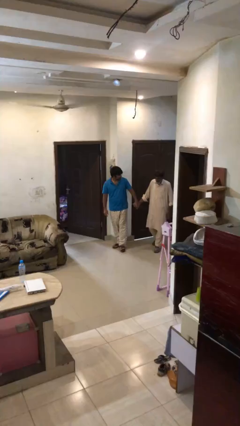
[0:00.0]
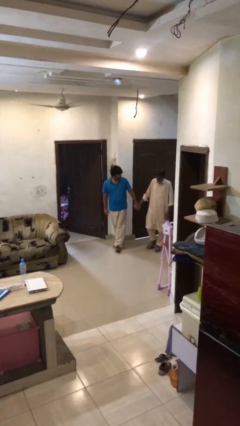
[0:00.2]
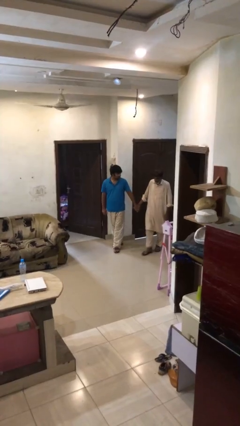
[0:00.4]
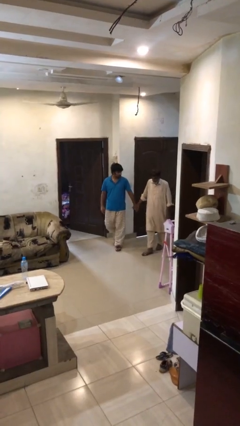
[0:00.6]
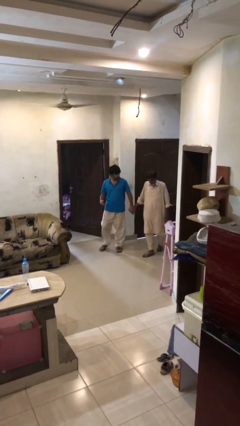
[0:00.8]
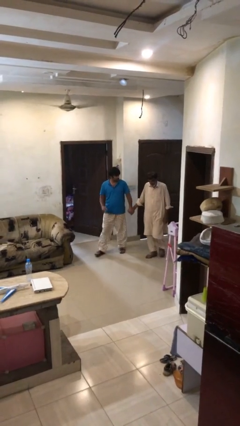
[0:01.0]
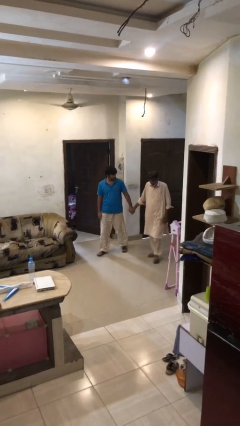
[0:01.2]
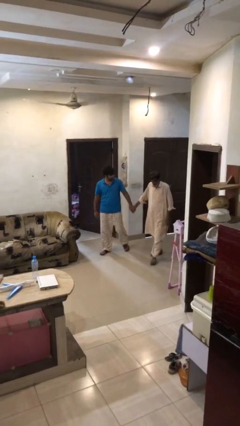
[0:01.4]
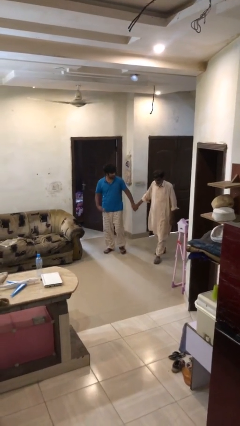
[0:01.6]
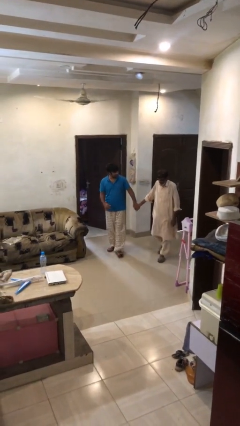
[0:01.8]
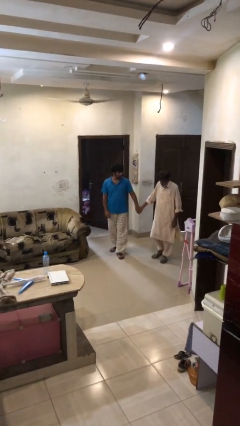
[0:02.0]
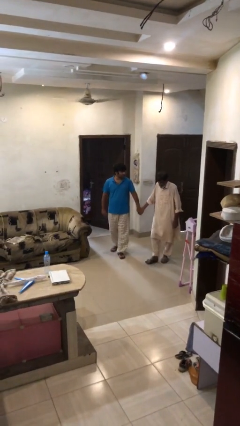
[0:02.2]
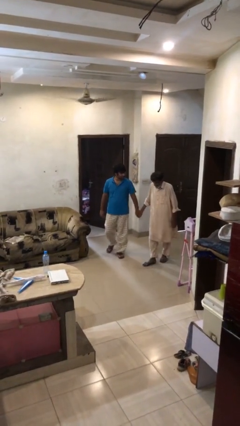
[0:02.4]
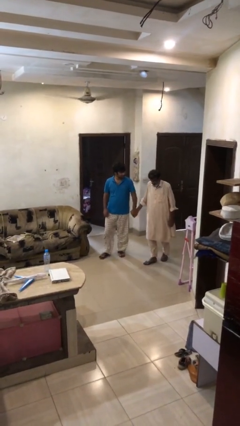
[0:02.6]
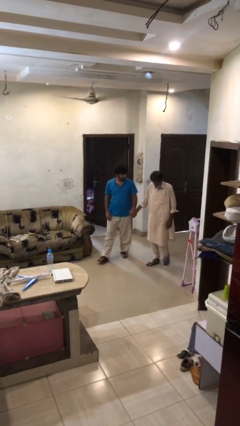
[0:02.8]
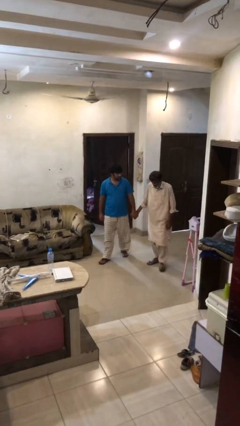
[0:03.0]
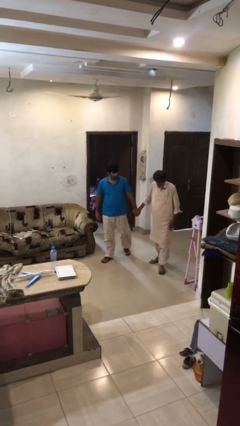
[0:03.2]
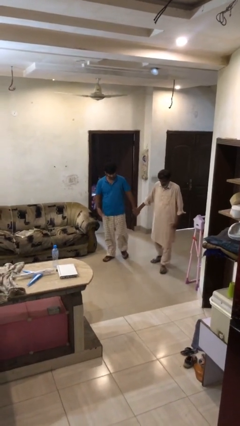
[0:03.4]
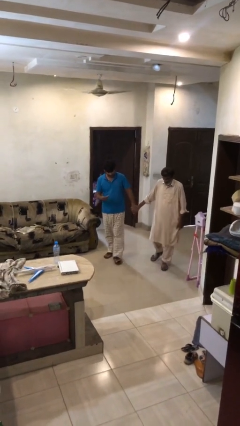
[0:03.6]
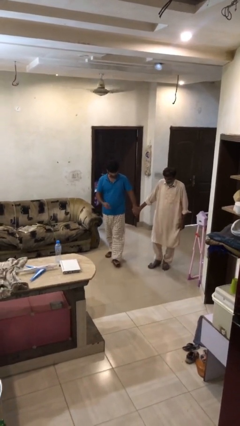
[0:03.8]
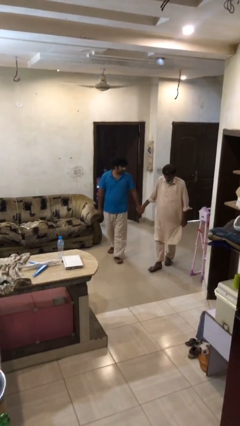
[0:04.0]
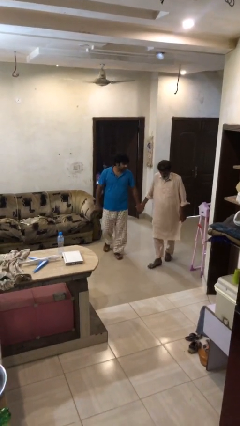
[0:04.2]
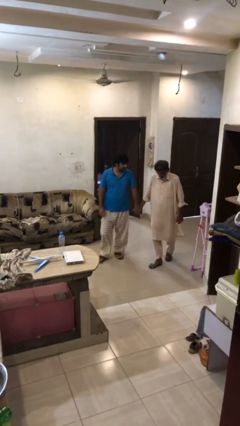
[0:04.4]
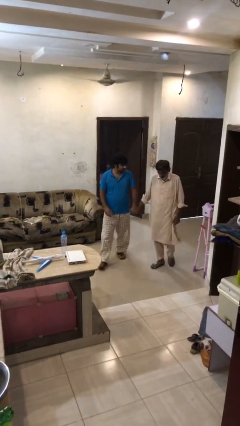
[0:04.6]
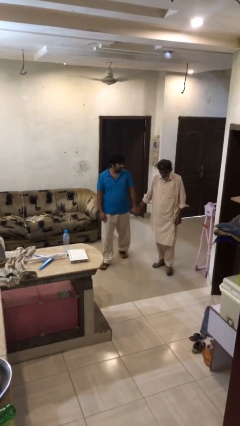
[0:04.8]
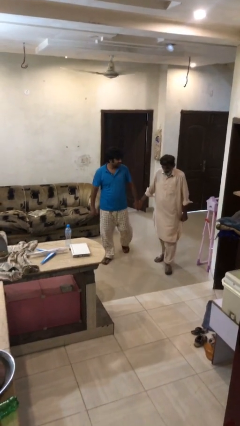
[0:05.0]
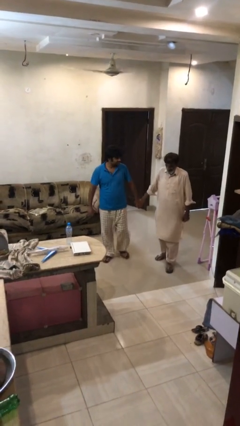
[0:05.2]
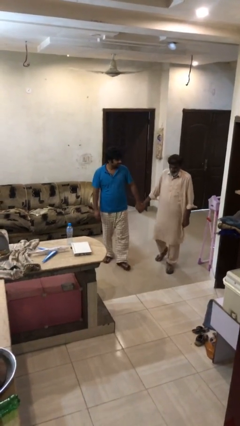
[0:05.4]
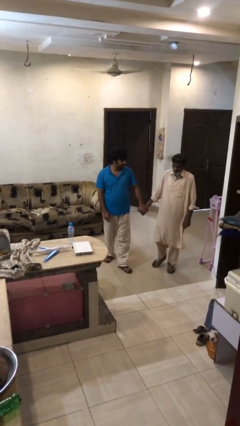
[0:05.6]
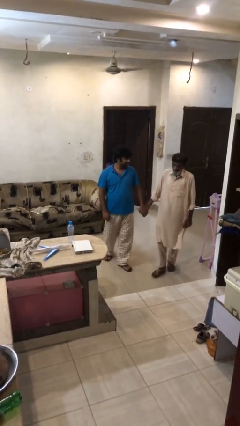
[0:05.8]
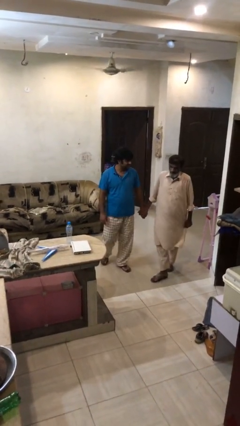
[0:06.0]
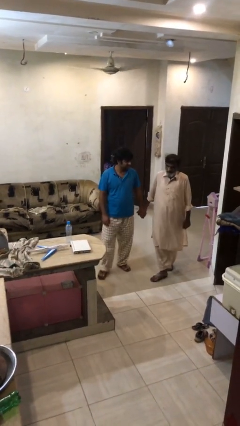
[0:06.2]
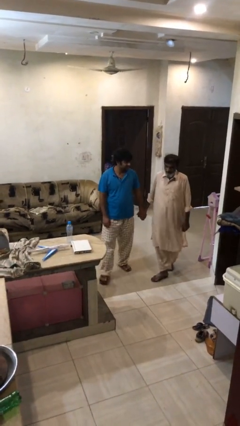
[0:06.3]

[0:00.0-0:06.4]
person holds hand

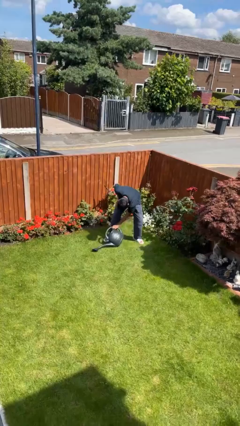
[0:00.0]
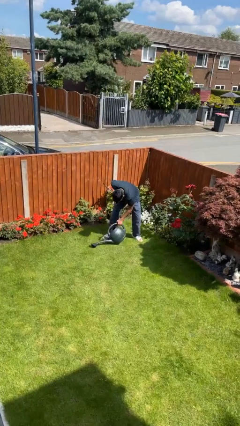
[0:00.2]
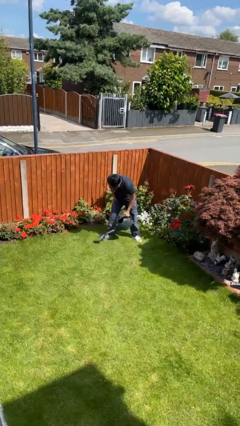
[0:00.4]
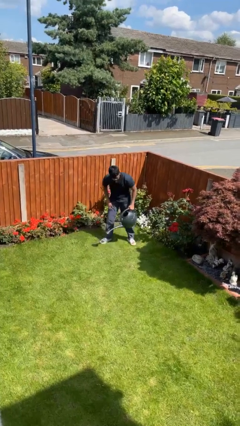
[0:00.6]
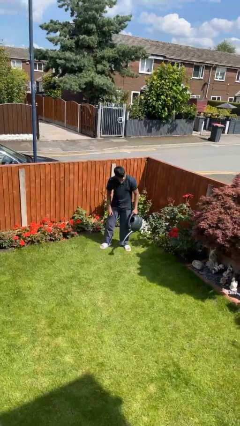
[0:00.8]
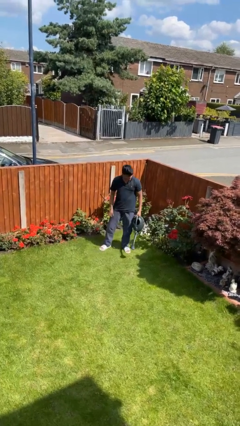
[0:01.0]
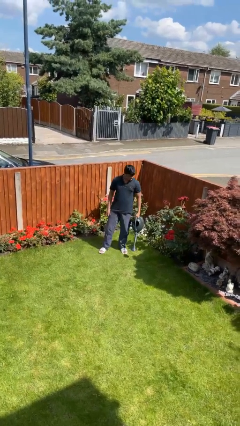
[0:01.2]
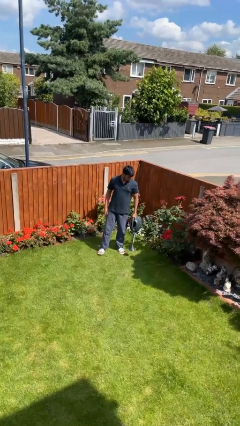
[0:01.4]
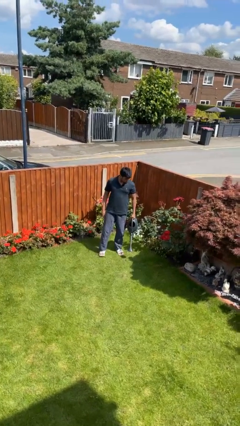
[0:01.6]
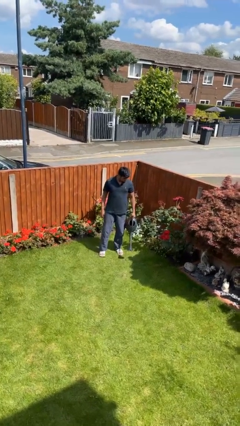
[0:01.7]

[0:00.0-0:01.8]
person picks up object from floor

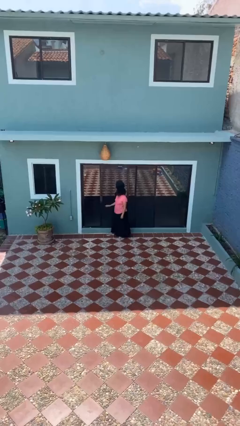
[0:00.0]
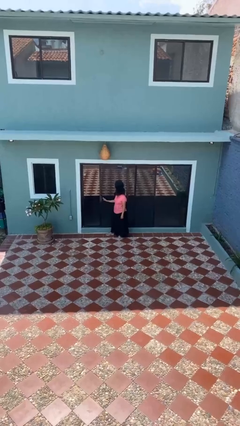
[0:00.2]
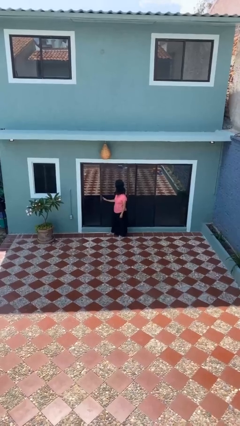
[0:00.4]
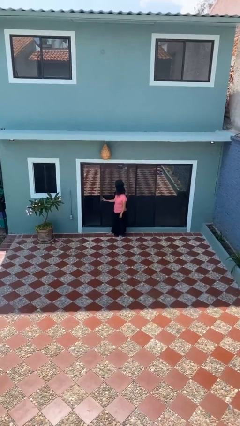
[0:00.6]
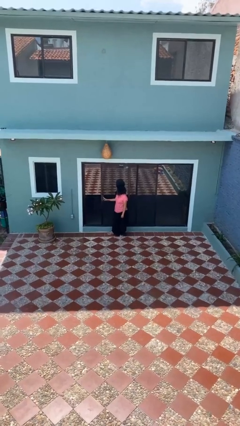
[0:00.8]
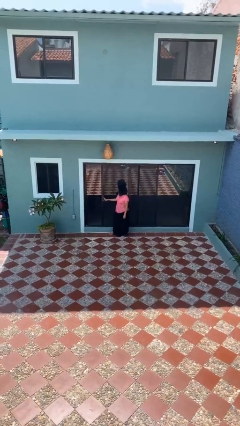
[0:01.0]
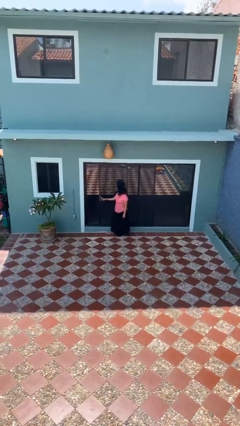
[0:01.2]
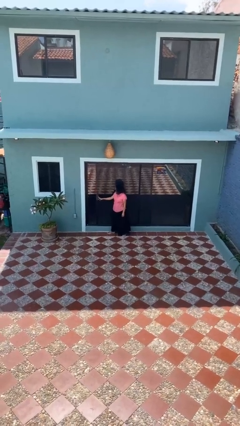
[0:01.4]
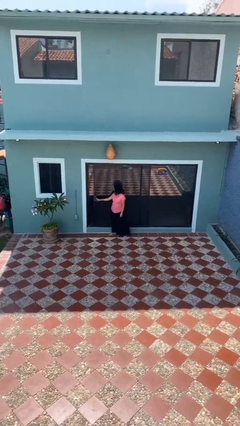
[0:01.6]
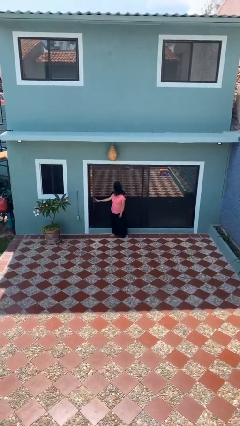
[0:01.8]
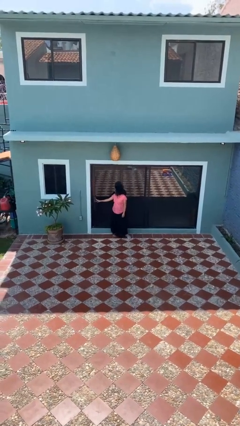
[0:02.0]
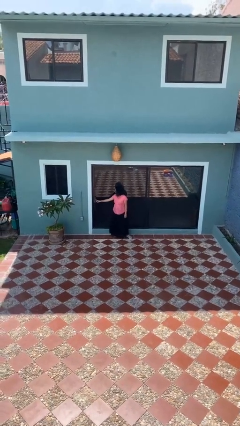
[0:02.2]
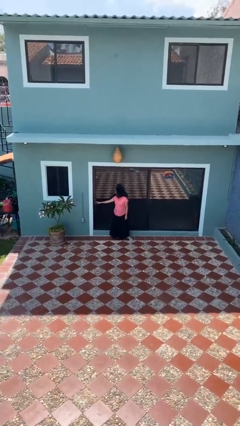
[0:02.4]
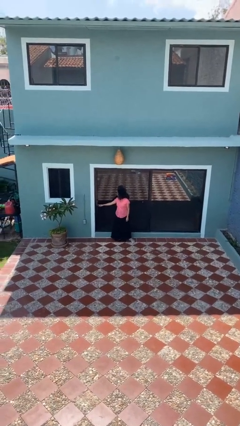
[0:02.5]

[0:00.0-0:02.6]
person closes sliding door

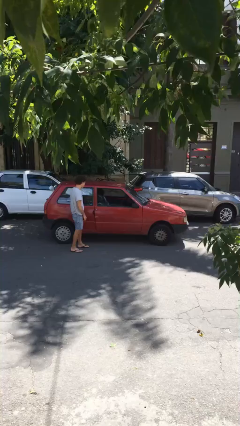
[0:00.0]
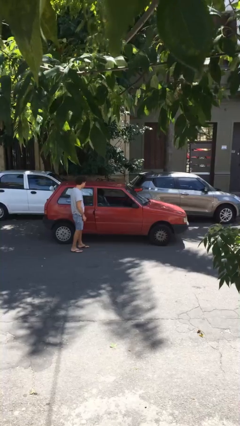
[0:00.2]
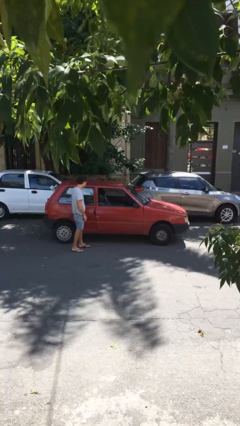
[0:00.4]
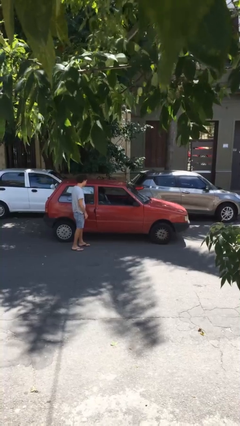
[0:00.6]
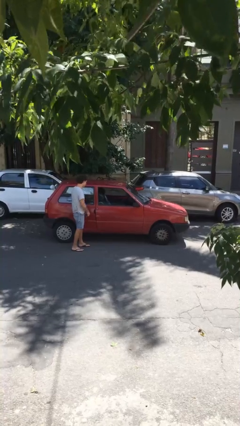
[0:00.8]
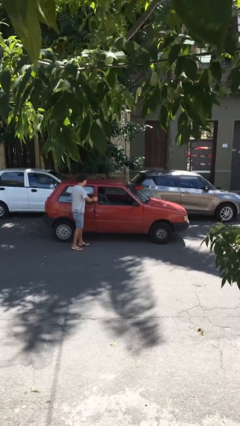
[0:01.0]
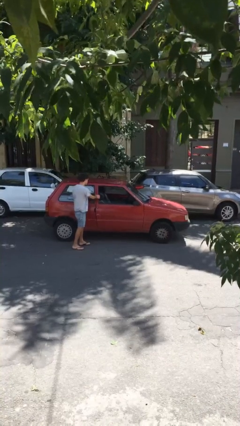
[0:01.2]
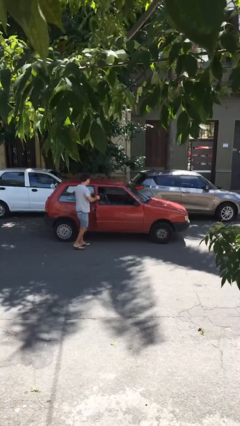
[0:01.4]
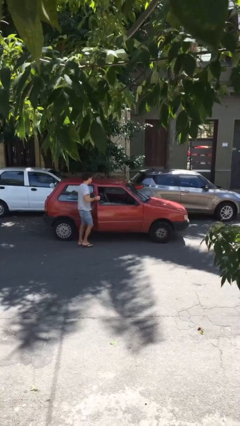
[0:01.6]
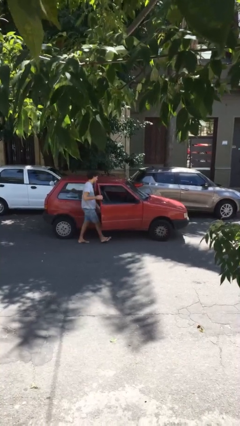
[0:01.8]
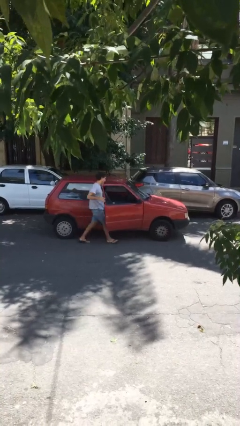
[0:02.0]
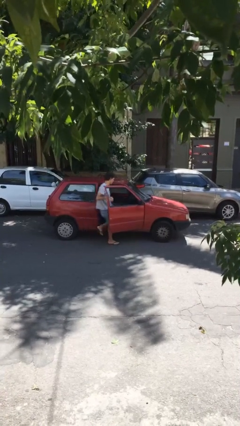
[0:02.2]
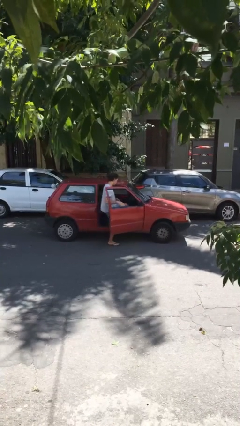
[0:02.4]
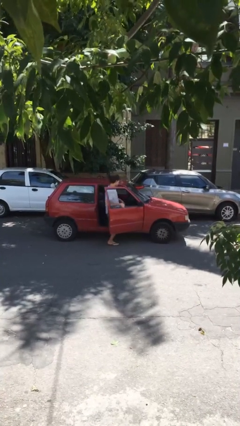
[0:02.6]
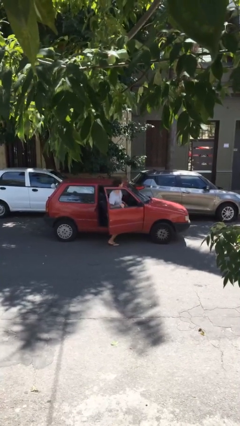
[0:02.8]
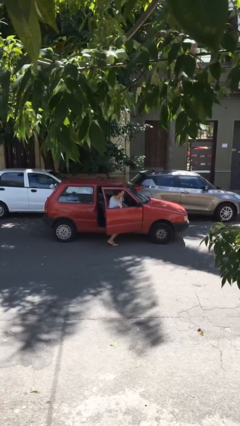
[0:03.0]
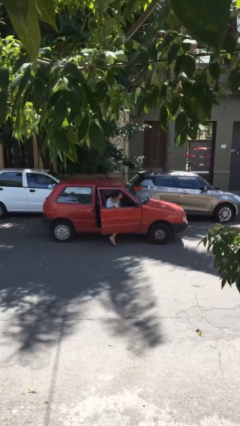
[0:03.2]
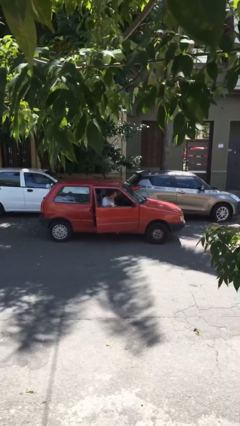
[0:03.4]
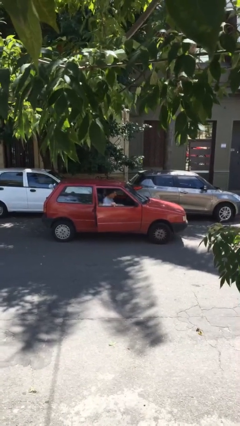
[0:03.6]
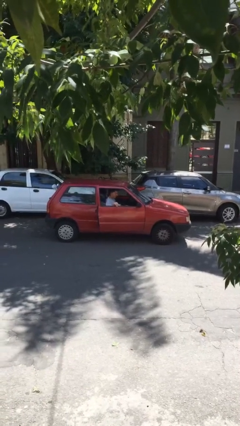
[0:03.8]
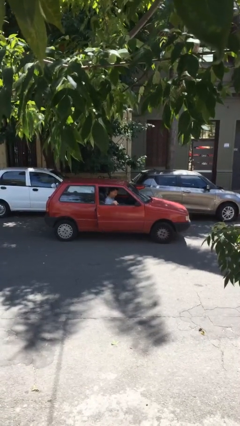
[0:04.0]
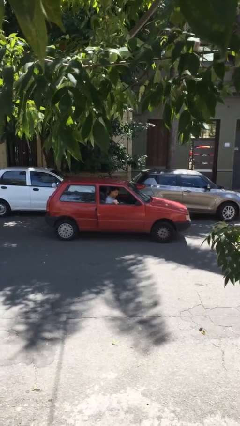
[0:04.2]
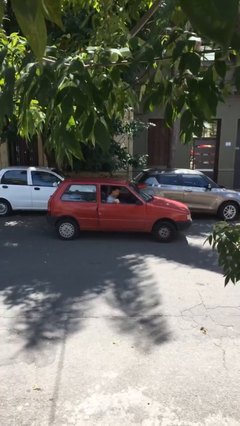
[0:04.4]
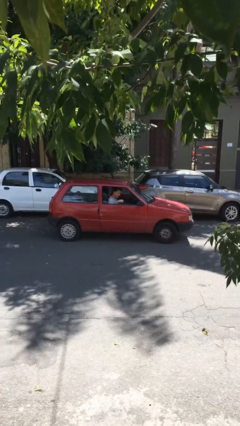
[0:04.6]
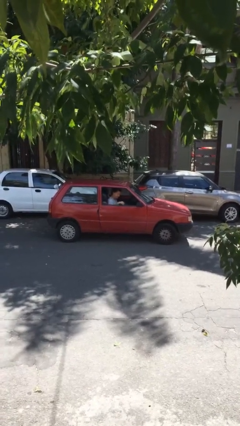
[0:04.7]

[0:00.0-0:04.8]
car picks up person

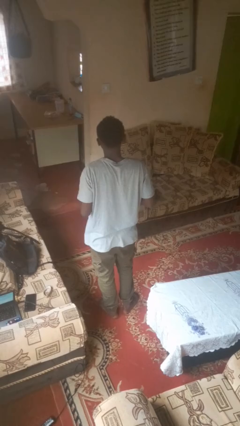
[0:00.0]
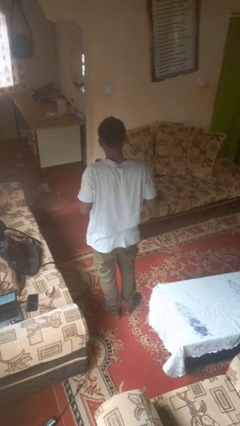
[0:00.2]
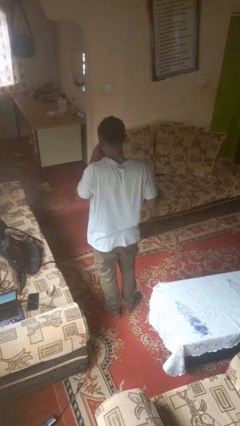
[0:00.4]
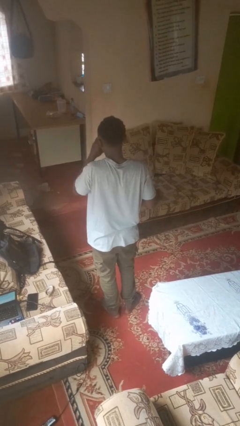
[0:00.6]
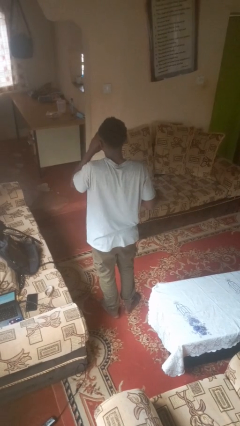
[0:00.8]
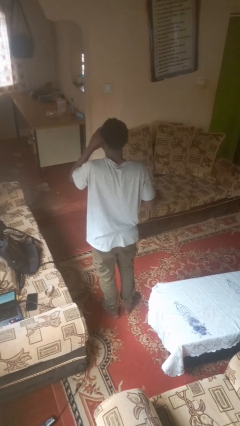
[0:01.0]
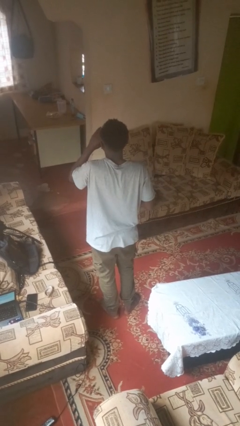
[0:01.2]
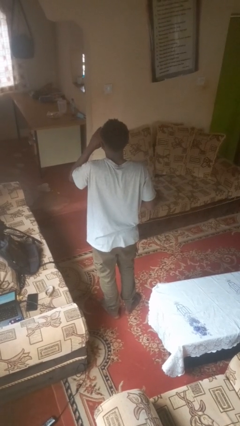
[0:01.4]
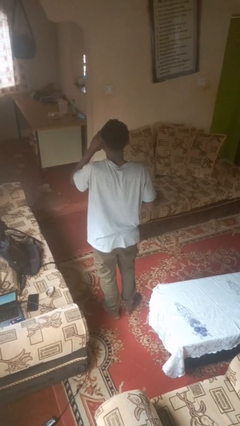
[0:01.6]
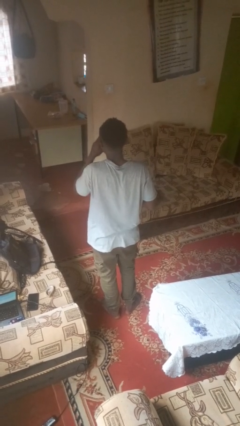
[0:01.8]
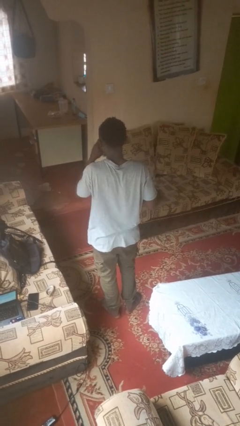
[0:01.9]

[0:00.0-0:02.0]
person drinks from cup

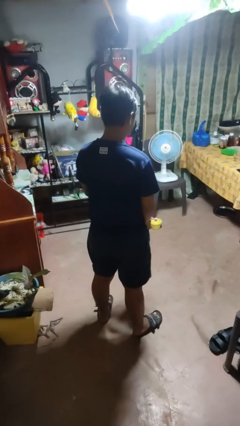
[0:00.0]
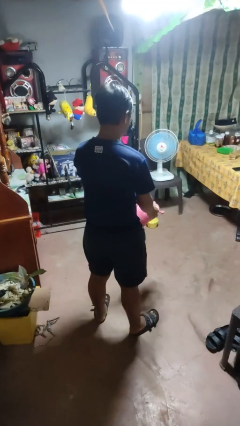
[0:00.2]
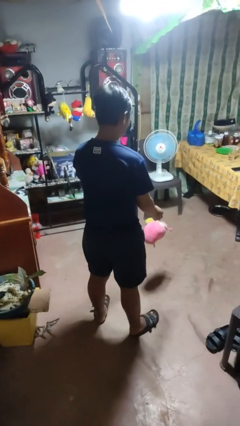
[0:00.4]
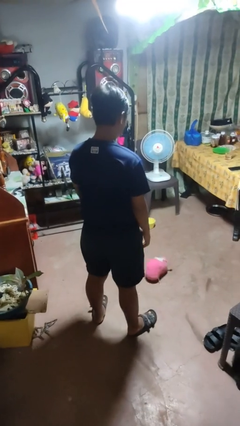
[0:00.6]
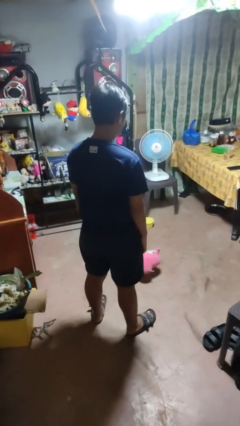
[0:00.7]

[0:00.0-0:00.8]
person throws object into air
